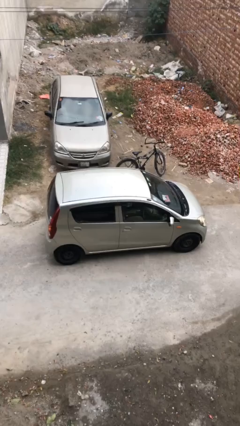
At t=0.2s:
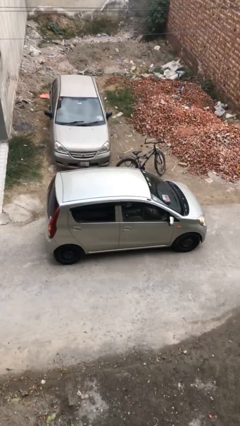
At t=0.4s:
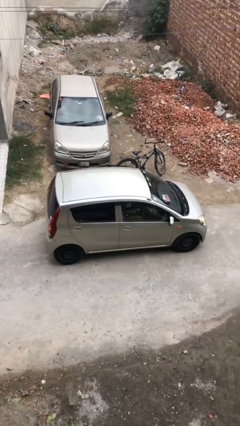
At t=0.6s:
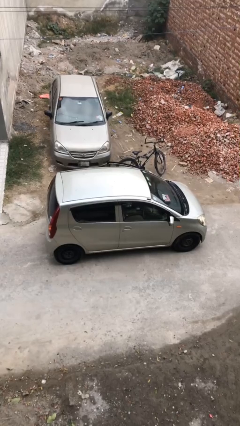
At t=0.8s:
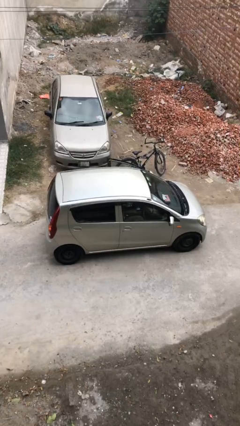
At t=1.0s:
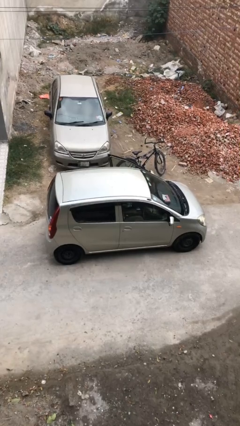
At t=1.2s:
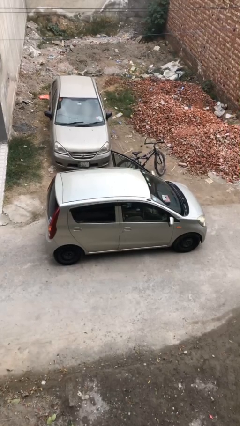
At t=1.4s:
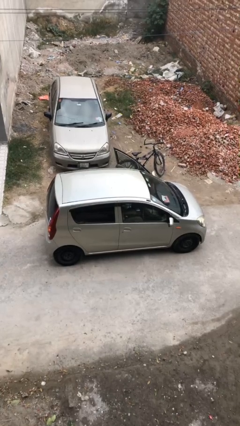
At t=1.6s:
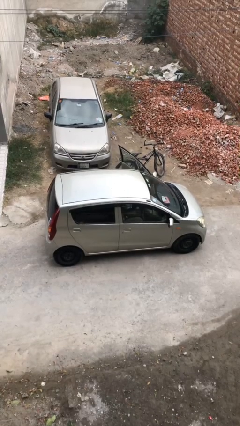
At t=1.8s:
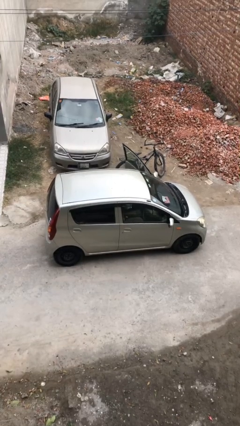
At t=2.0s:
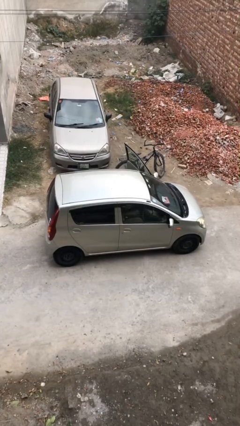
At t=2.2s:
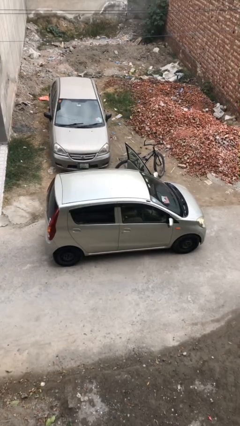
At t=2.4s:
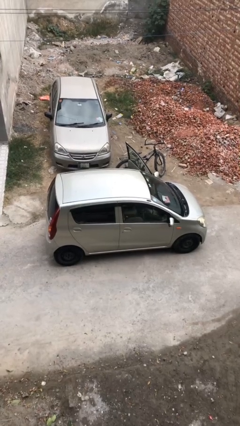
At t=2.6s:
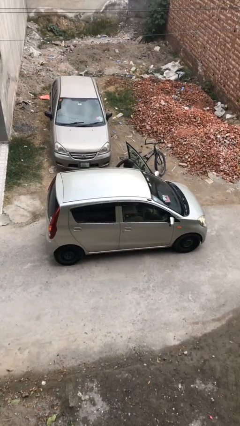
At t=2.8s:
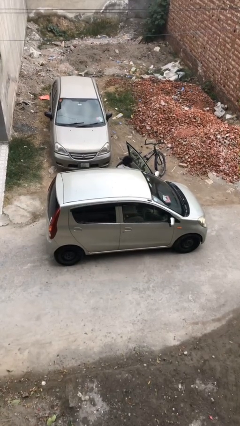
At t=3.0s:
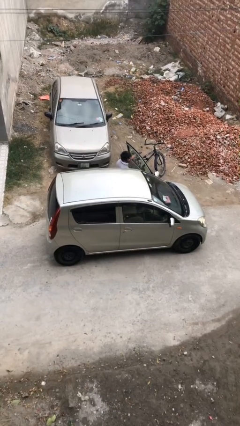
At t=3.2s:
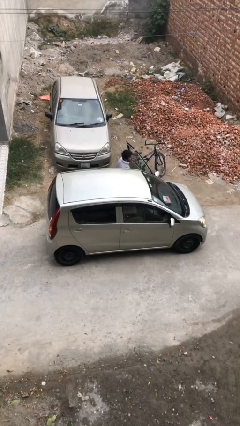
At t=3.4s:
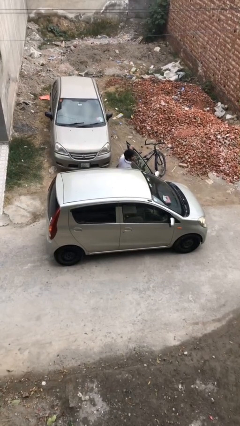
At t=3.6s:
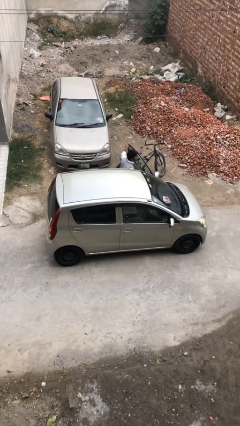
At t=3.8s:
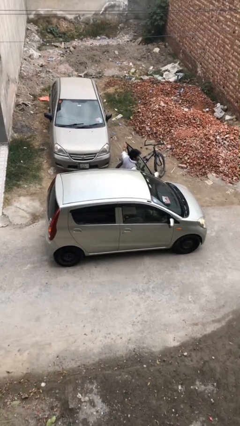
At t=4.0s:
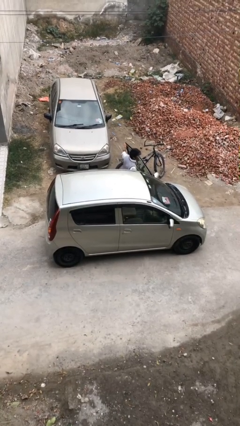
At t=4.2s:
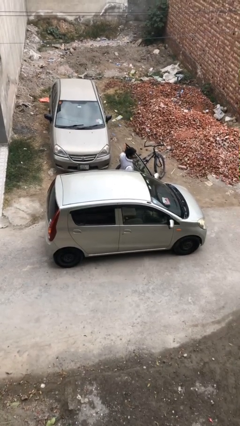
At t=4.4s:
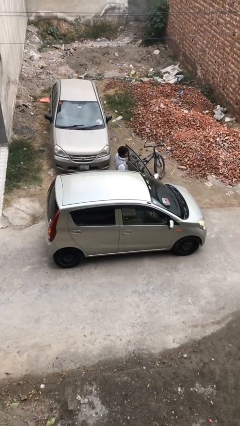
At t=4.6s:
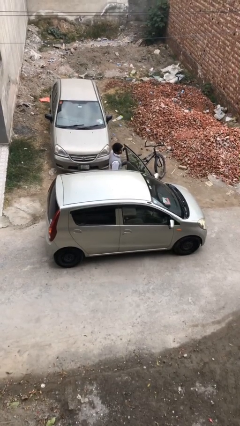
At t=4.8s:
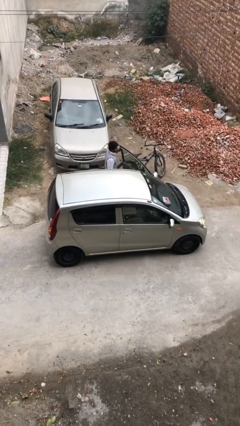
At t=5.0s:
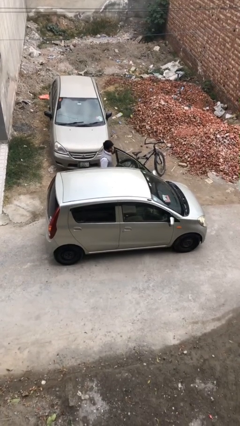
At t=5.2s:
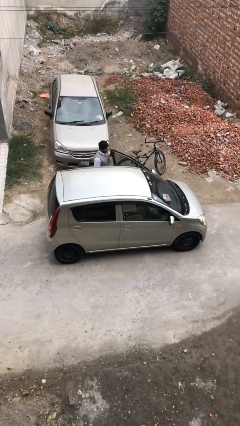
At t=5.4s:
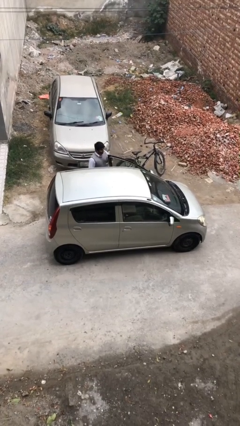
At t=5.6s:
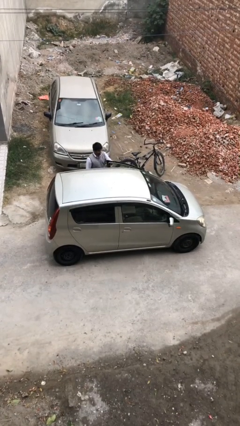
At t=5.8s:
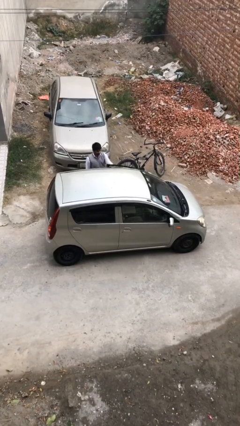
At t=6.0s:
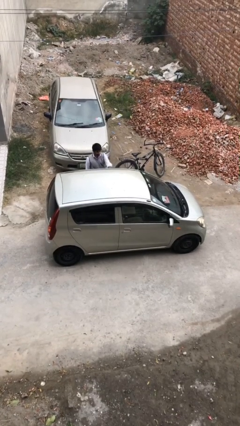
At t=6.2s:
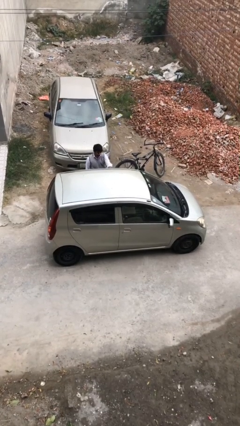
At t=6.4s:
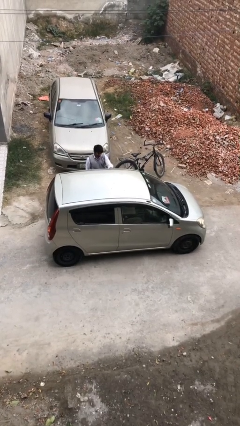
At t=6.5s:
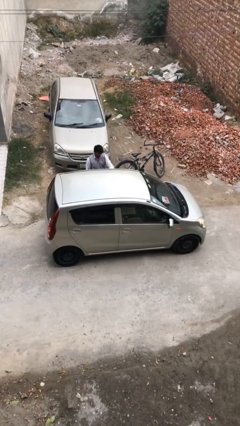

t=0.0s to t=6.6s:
car drops off person

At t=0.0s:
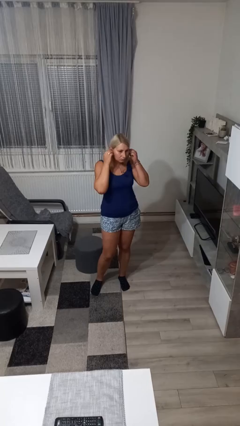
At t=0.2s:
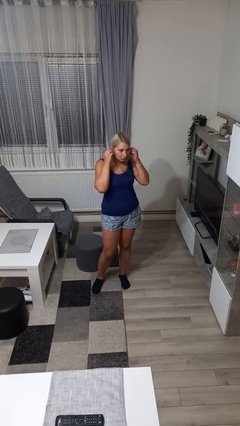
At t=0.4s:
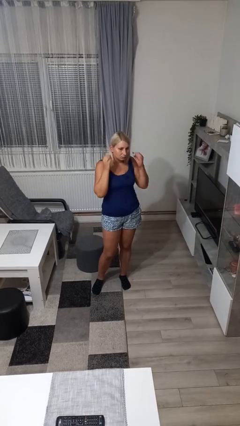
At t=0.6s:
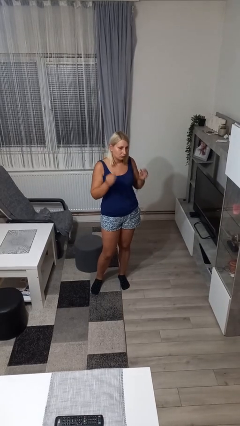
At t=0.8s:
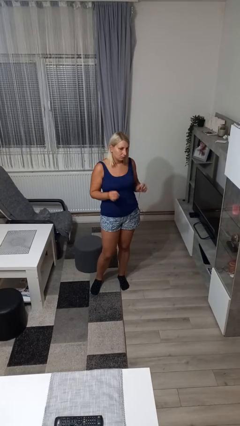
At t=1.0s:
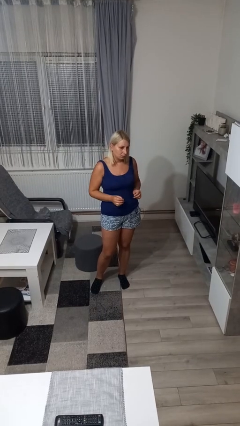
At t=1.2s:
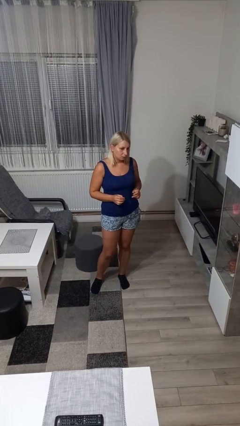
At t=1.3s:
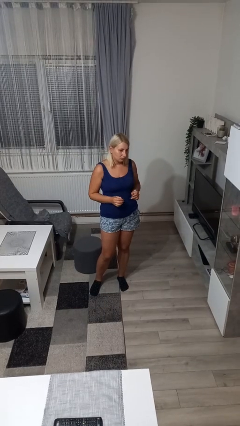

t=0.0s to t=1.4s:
person takes off headphones

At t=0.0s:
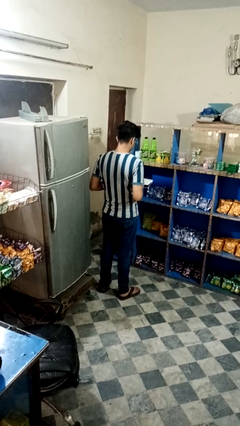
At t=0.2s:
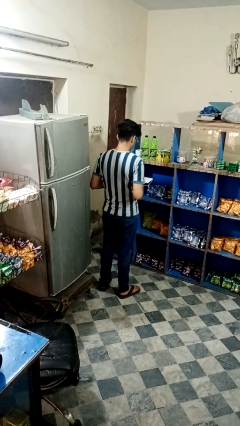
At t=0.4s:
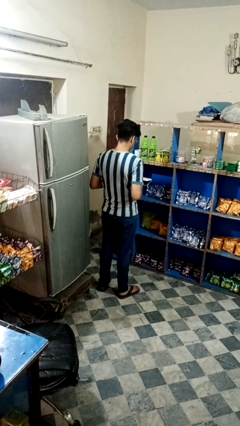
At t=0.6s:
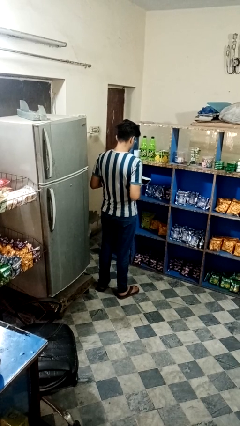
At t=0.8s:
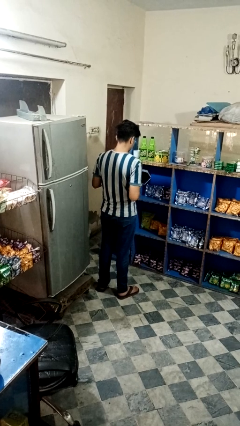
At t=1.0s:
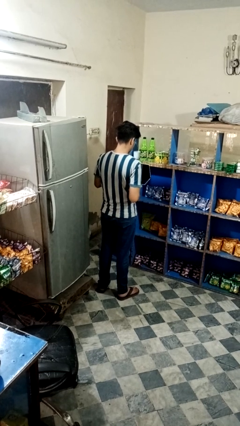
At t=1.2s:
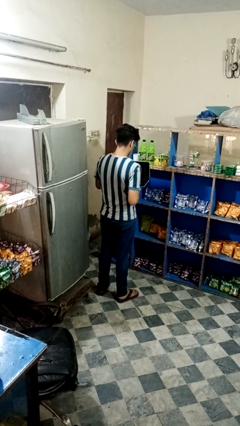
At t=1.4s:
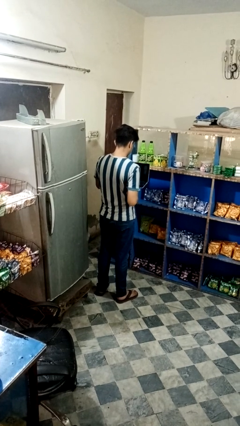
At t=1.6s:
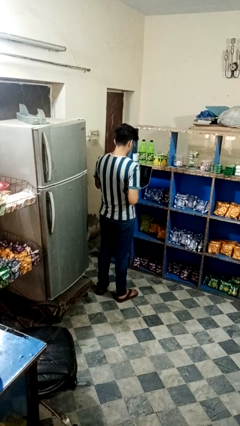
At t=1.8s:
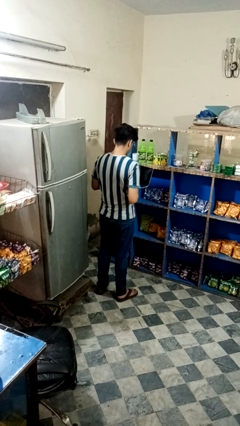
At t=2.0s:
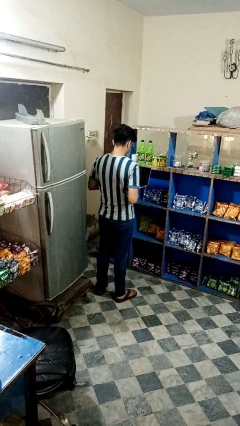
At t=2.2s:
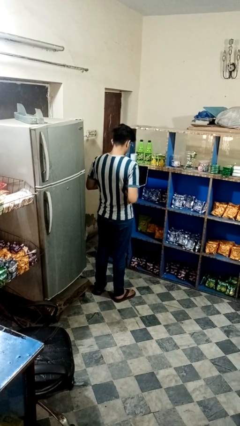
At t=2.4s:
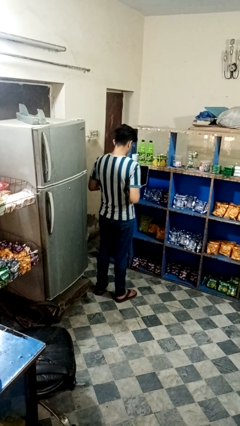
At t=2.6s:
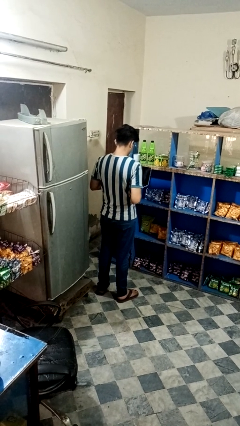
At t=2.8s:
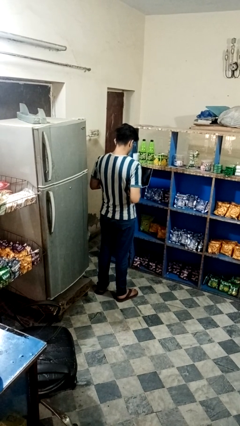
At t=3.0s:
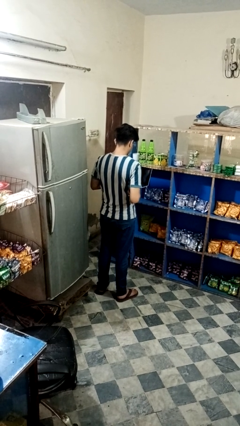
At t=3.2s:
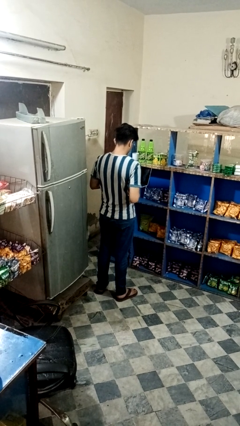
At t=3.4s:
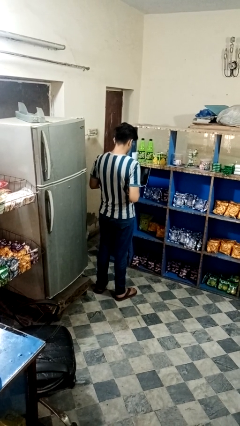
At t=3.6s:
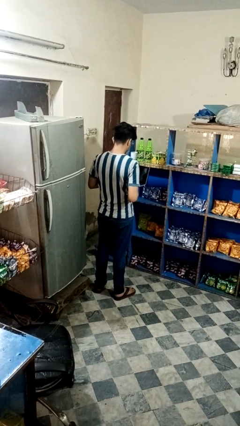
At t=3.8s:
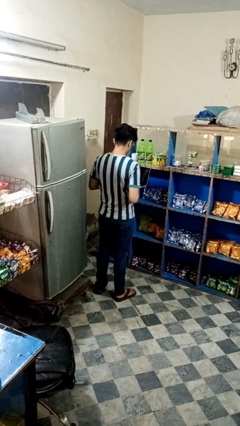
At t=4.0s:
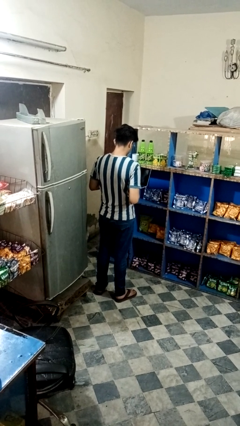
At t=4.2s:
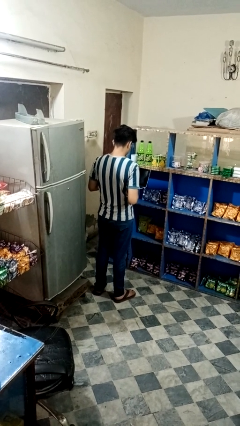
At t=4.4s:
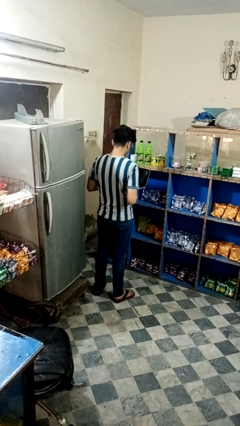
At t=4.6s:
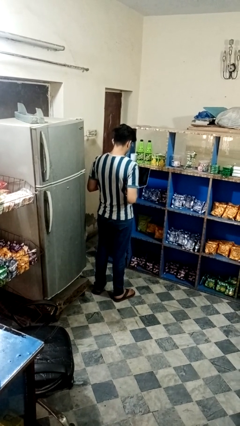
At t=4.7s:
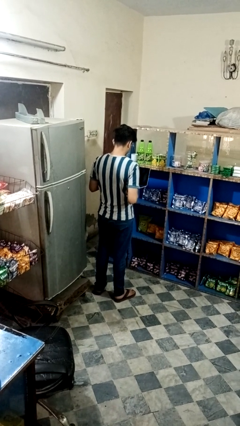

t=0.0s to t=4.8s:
person opens laptop

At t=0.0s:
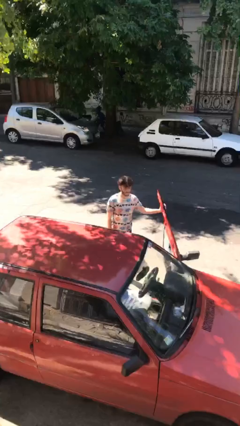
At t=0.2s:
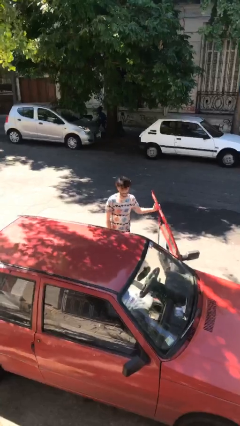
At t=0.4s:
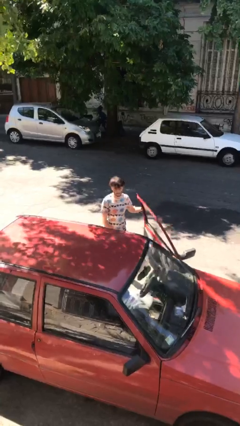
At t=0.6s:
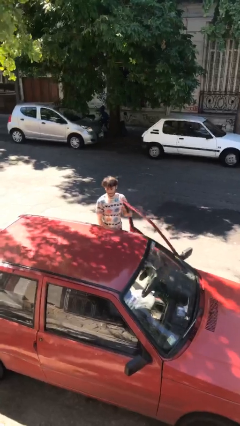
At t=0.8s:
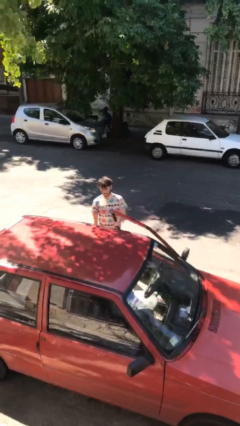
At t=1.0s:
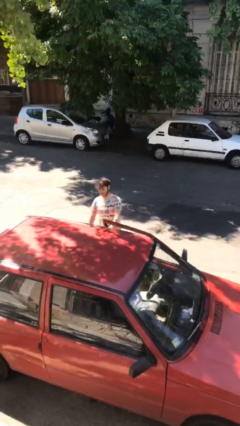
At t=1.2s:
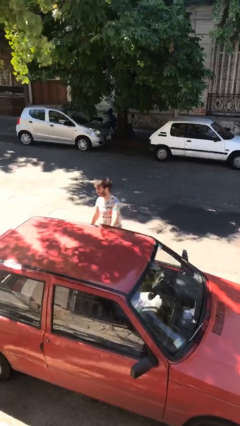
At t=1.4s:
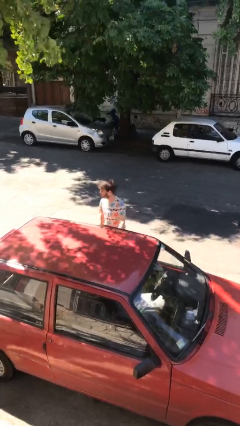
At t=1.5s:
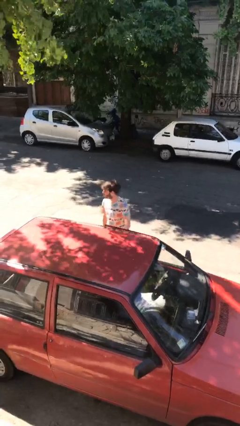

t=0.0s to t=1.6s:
person closes car door

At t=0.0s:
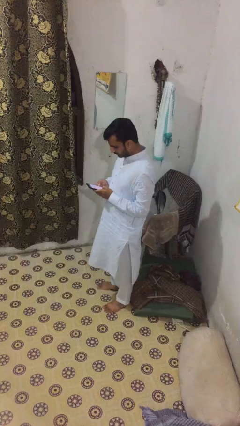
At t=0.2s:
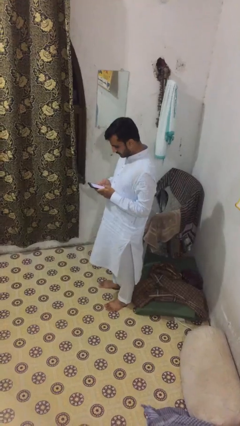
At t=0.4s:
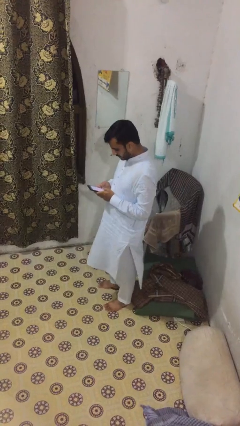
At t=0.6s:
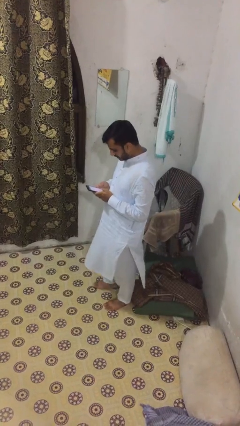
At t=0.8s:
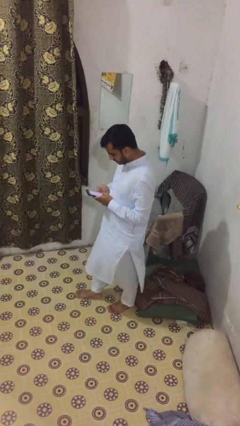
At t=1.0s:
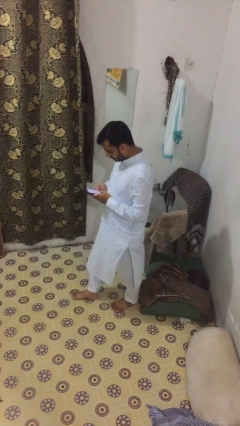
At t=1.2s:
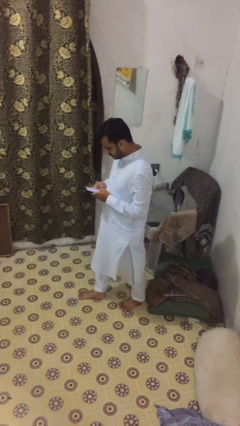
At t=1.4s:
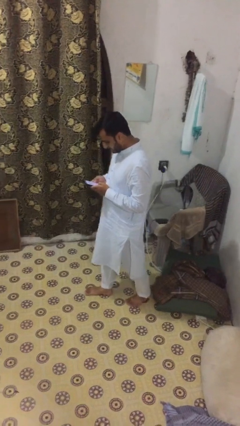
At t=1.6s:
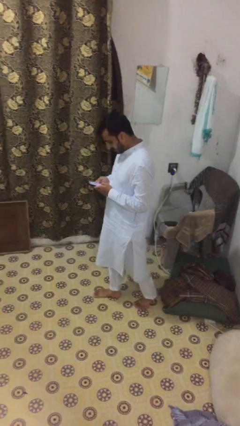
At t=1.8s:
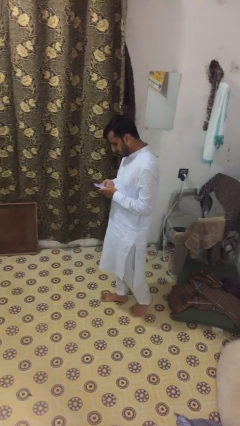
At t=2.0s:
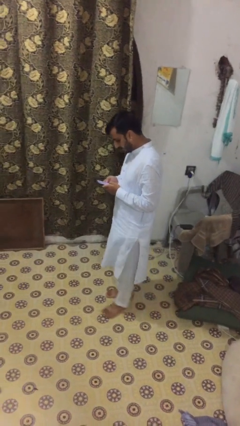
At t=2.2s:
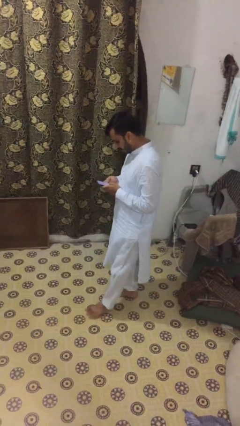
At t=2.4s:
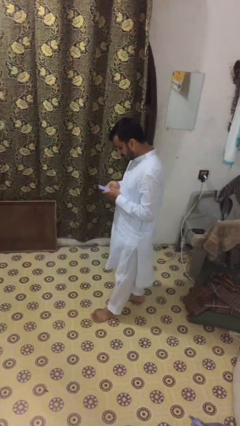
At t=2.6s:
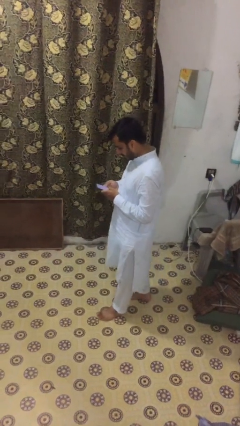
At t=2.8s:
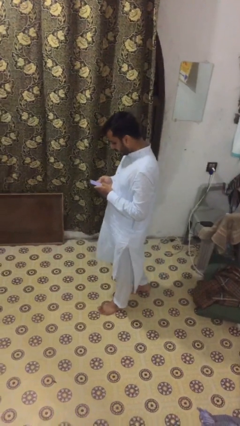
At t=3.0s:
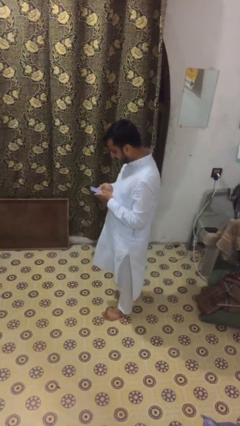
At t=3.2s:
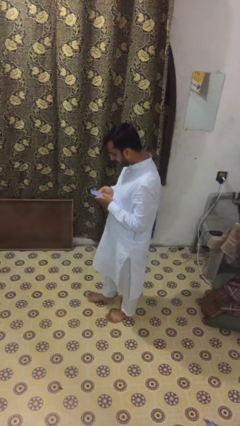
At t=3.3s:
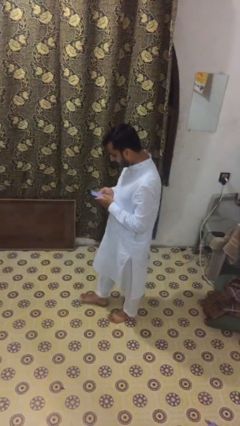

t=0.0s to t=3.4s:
person texts on phone
